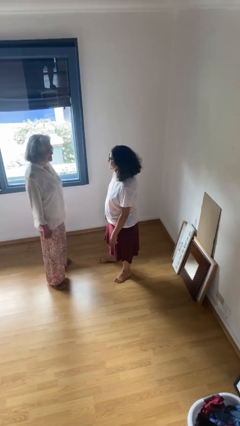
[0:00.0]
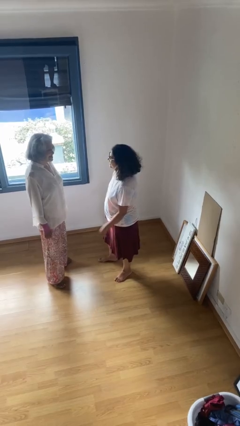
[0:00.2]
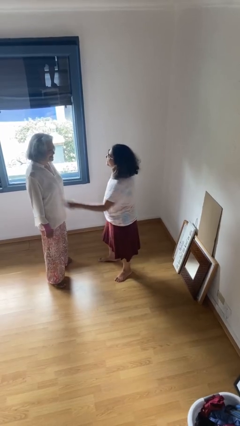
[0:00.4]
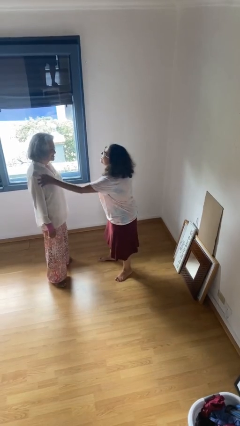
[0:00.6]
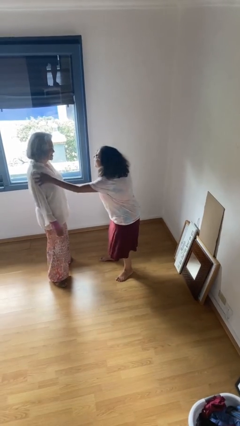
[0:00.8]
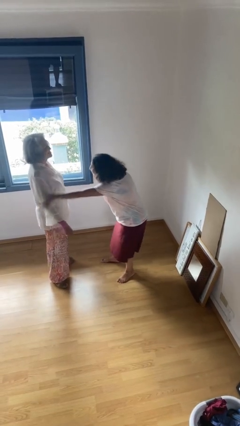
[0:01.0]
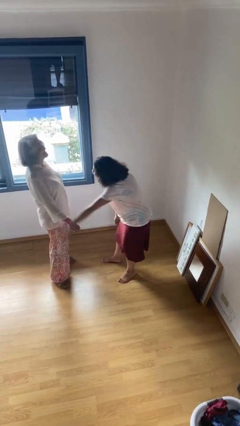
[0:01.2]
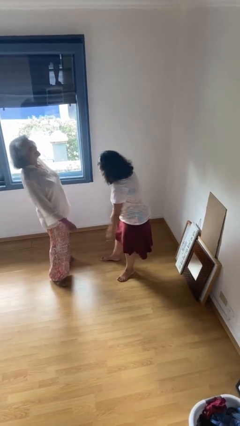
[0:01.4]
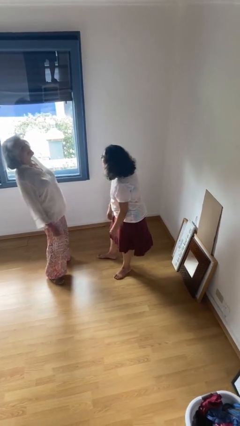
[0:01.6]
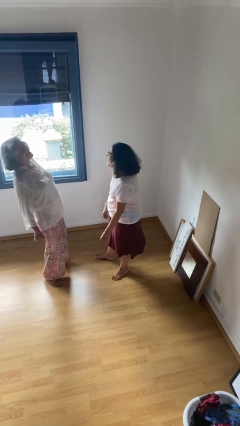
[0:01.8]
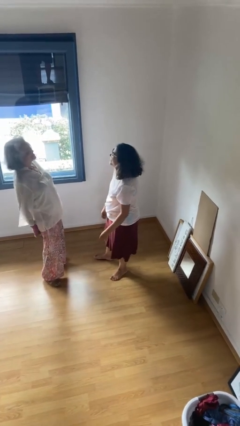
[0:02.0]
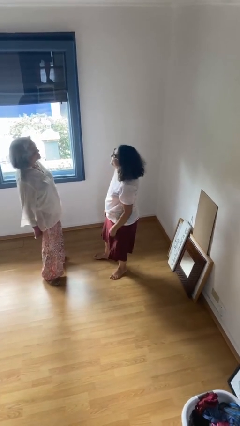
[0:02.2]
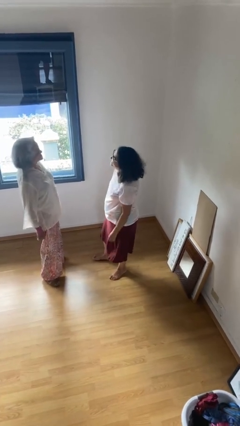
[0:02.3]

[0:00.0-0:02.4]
person shoves person

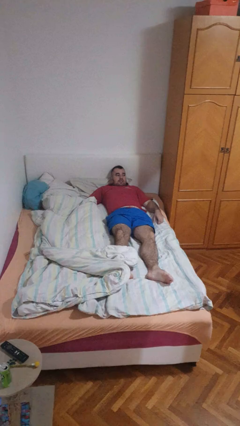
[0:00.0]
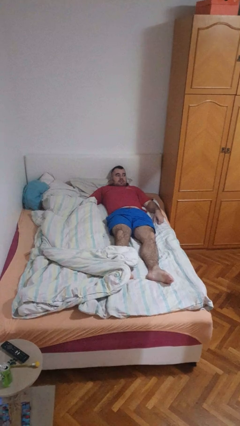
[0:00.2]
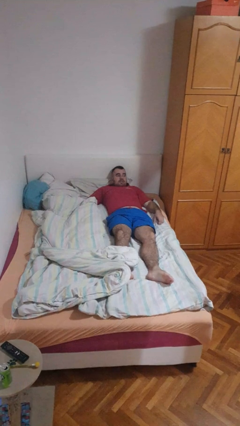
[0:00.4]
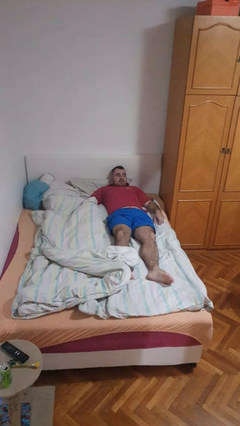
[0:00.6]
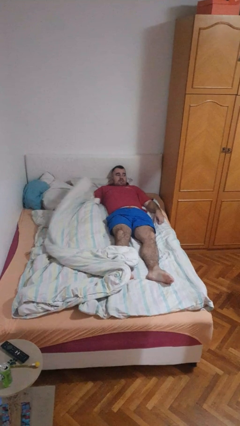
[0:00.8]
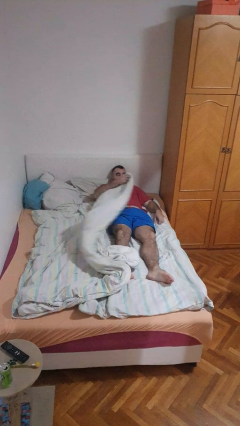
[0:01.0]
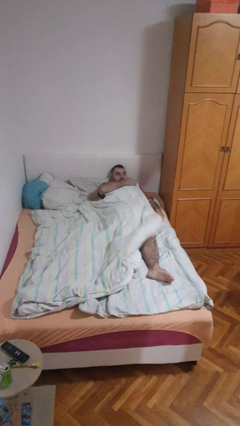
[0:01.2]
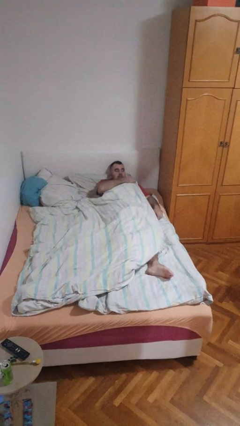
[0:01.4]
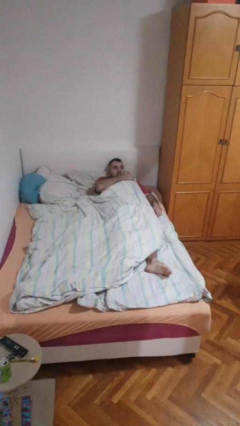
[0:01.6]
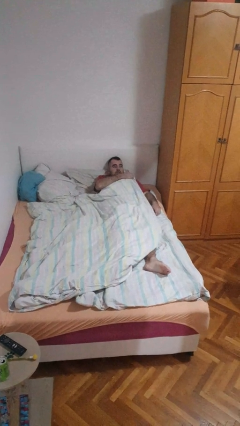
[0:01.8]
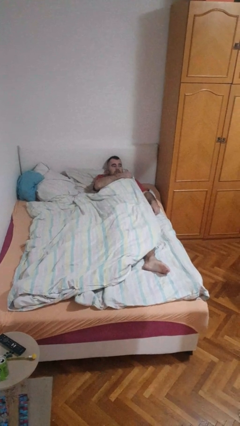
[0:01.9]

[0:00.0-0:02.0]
person covers with bedsheets

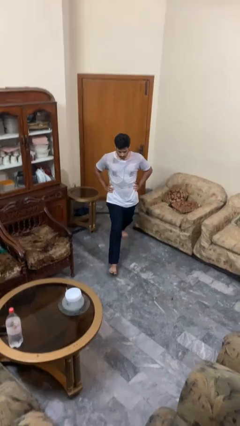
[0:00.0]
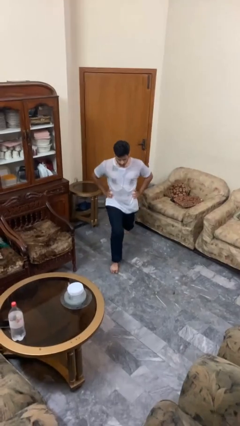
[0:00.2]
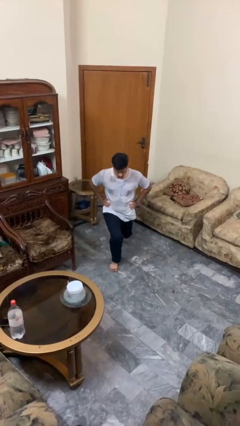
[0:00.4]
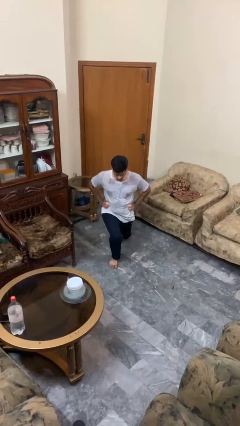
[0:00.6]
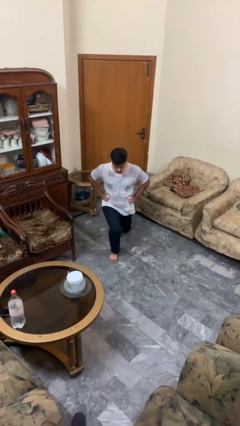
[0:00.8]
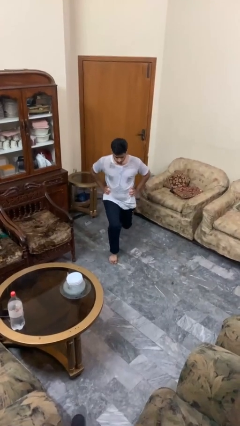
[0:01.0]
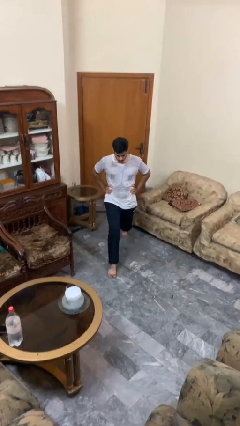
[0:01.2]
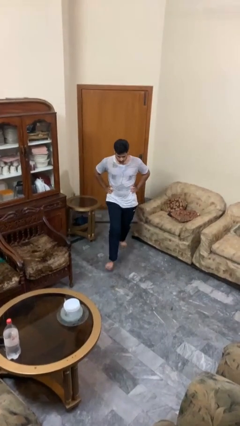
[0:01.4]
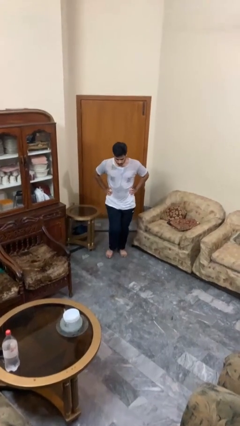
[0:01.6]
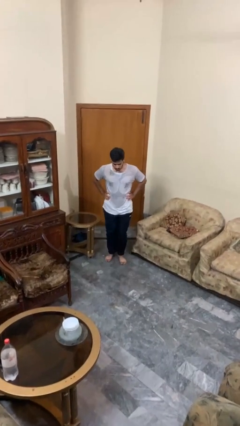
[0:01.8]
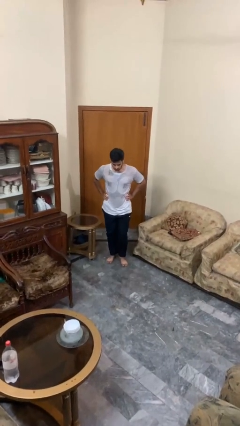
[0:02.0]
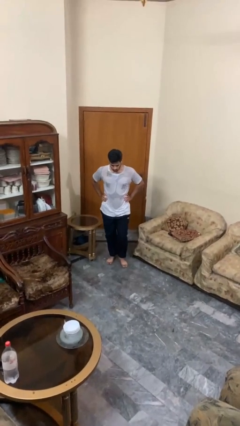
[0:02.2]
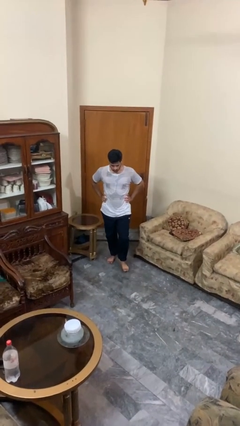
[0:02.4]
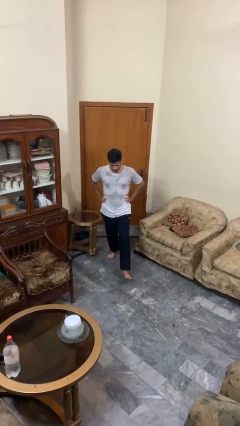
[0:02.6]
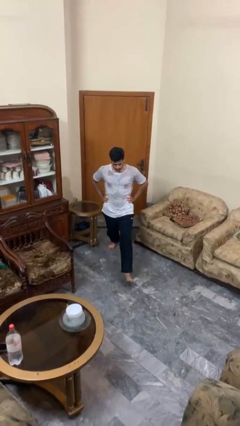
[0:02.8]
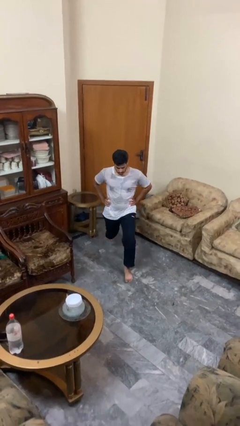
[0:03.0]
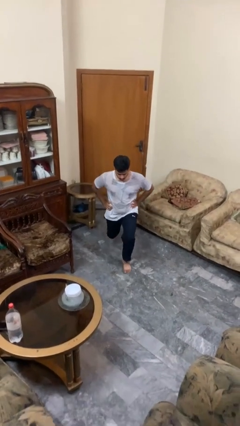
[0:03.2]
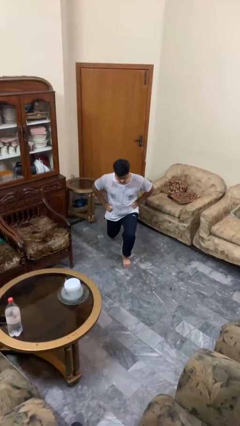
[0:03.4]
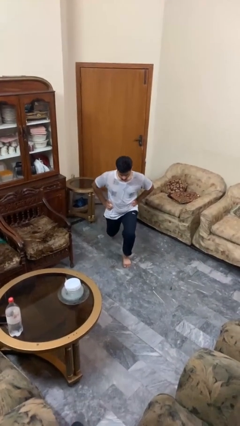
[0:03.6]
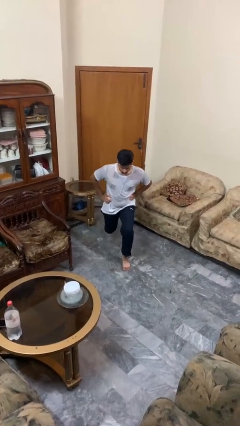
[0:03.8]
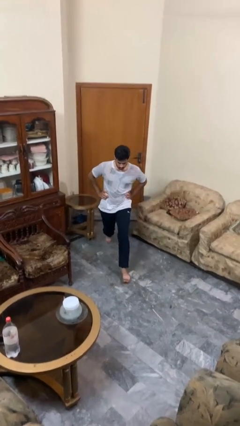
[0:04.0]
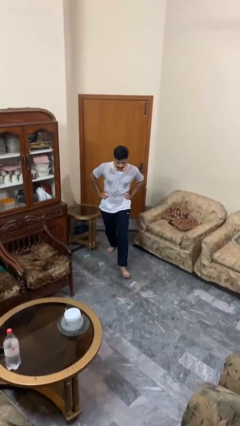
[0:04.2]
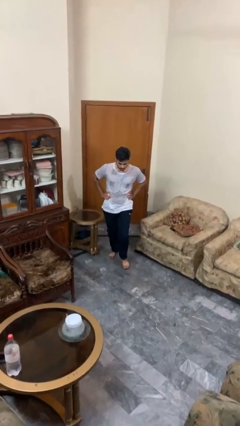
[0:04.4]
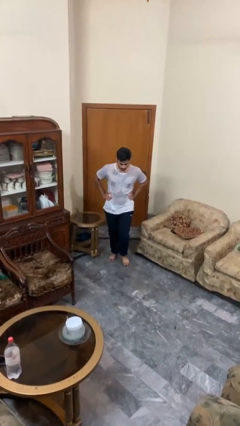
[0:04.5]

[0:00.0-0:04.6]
person exercises with lunges

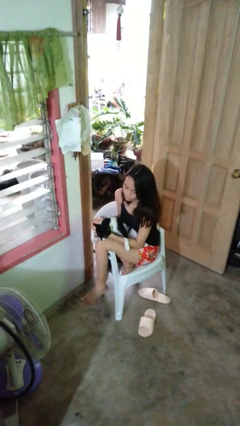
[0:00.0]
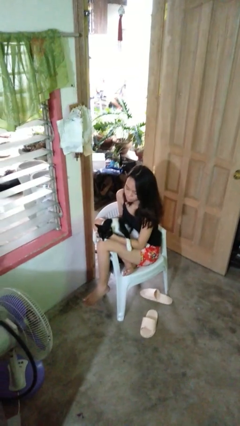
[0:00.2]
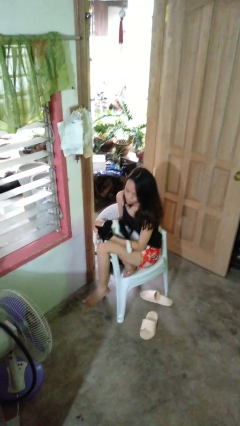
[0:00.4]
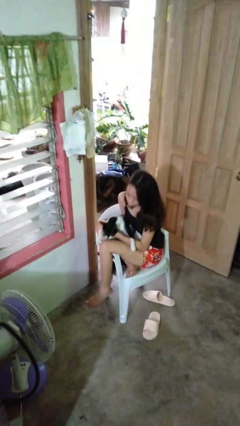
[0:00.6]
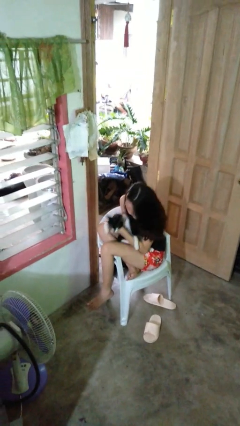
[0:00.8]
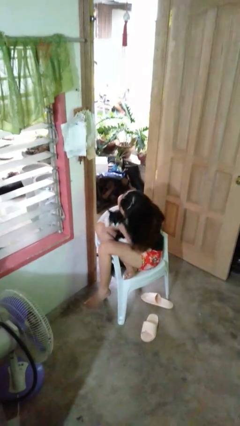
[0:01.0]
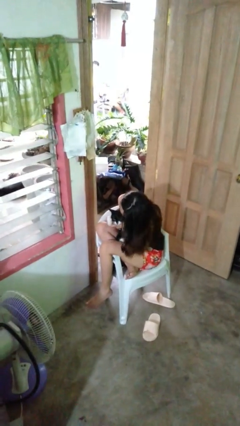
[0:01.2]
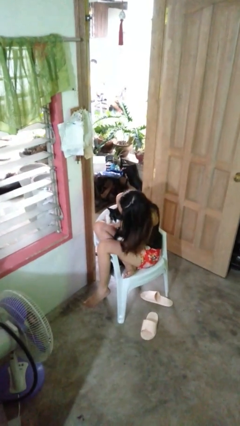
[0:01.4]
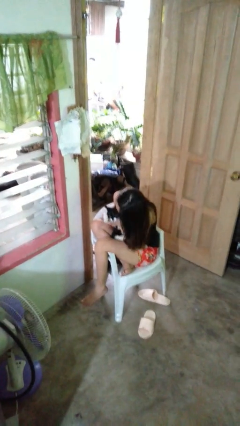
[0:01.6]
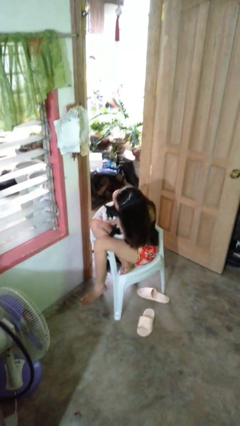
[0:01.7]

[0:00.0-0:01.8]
person hugs cat

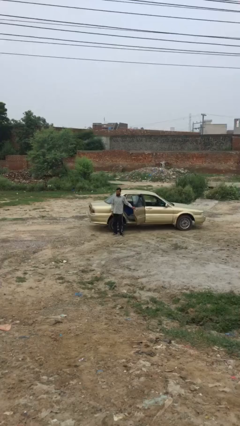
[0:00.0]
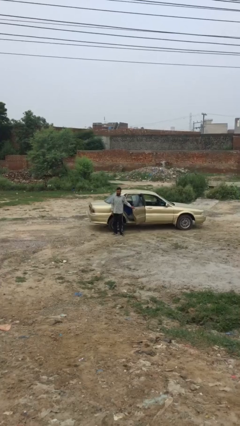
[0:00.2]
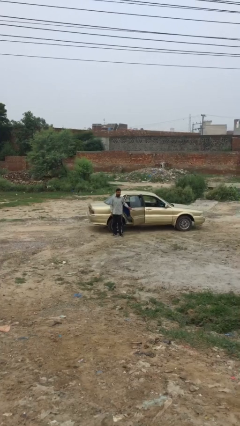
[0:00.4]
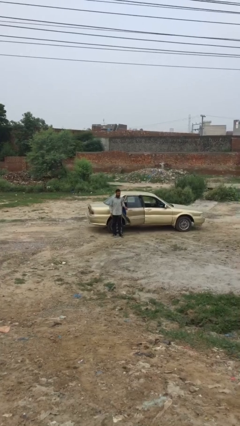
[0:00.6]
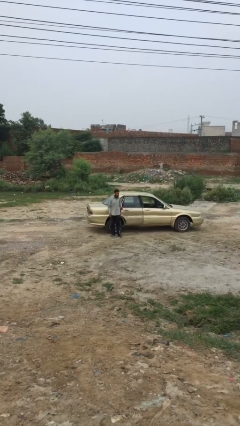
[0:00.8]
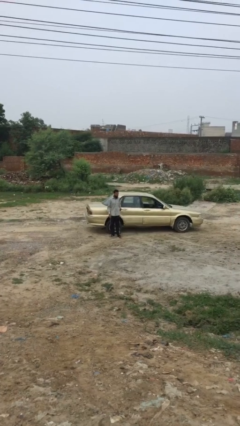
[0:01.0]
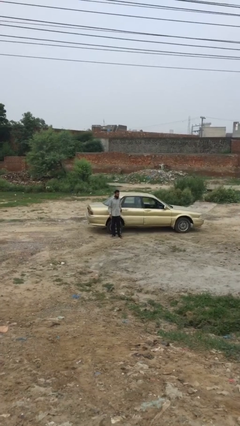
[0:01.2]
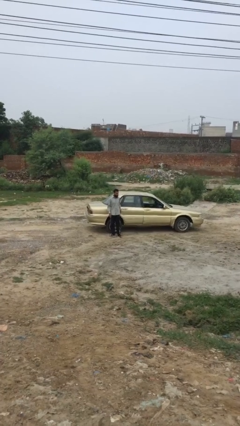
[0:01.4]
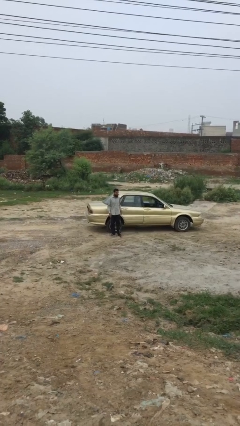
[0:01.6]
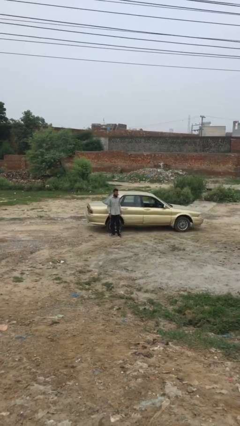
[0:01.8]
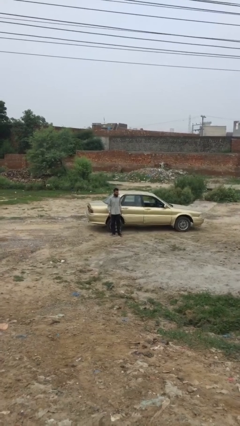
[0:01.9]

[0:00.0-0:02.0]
person closes car door

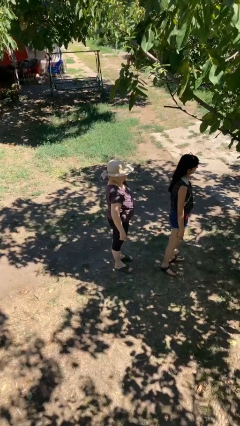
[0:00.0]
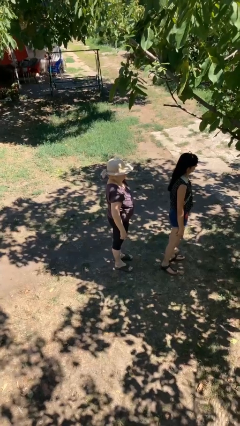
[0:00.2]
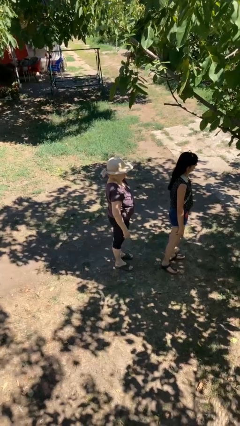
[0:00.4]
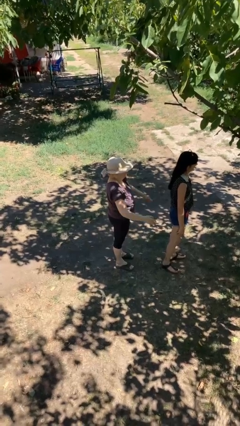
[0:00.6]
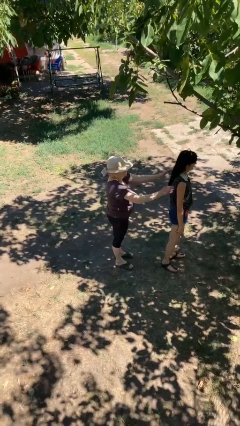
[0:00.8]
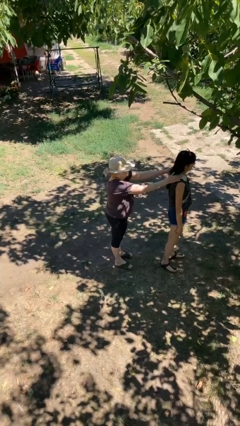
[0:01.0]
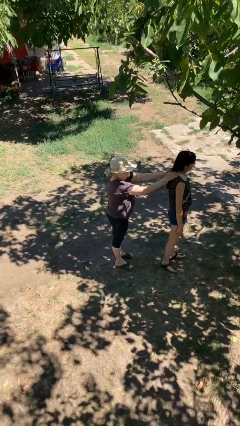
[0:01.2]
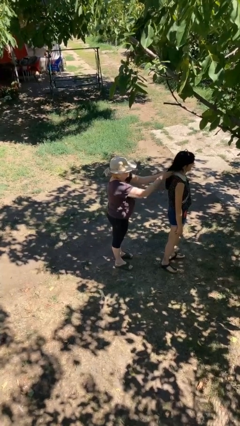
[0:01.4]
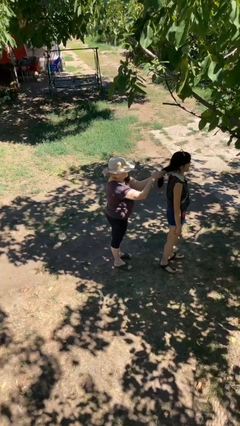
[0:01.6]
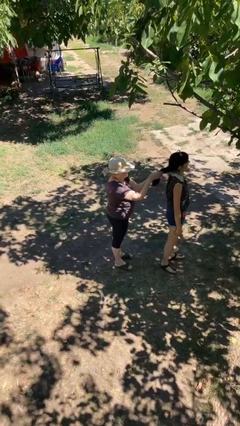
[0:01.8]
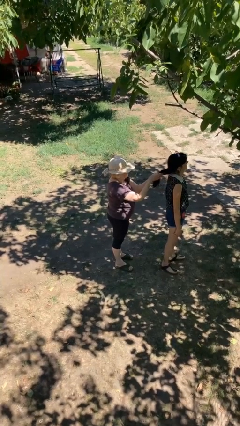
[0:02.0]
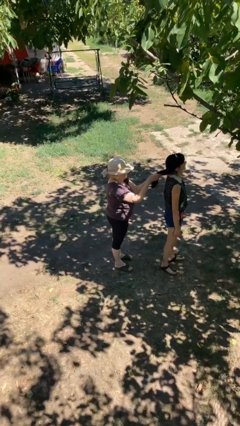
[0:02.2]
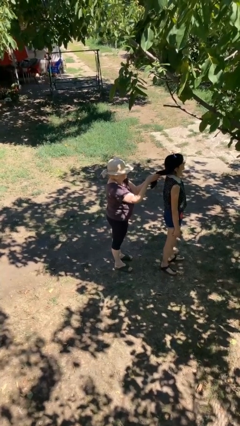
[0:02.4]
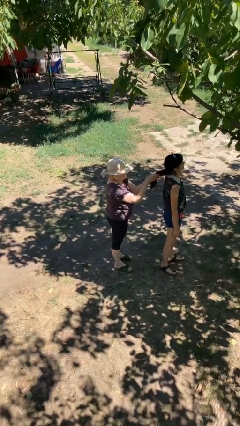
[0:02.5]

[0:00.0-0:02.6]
person grabs person by hair

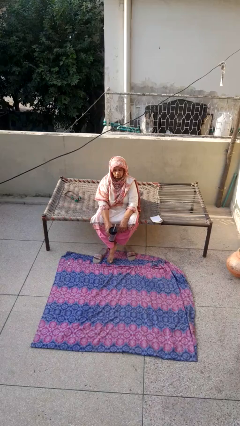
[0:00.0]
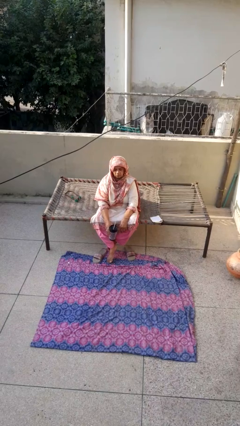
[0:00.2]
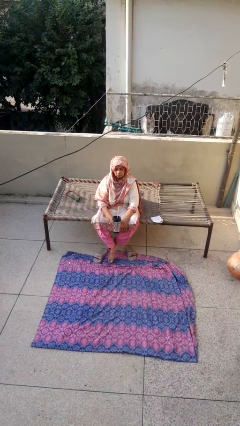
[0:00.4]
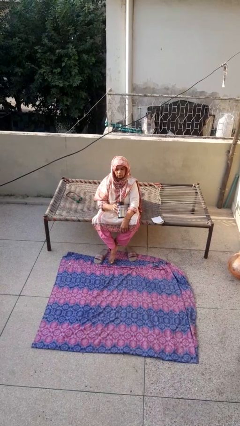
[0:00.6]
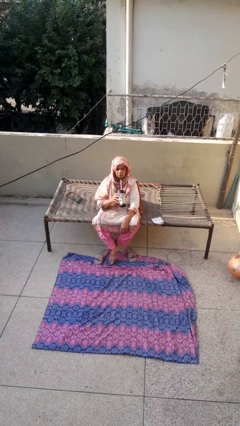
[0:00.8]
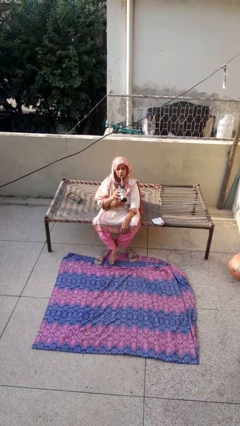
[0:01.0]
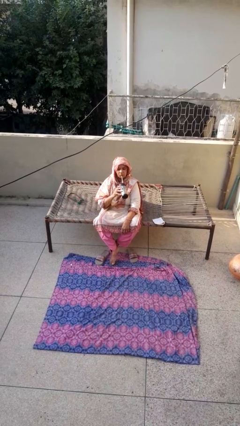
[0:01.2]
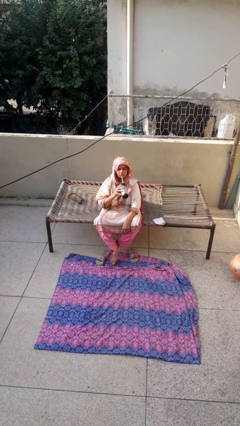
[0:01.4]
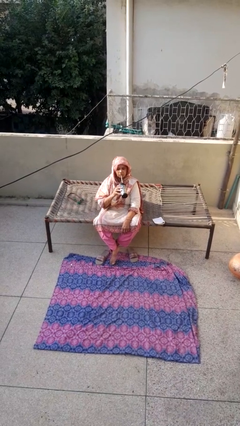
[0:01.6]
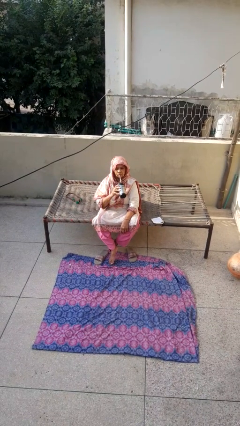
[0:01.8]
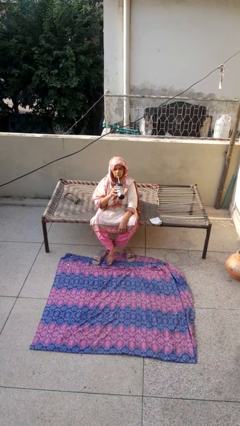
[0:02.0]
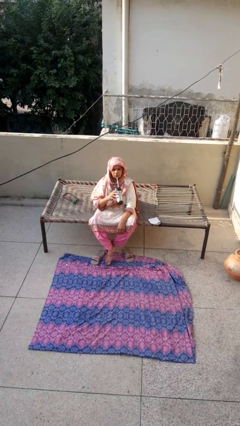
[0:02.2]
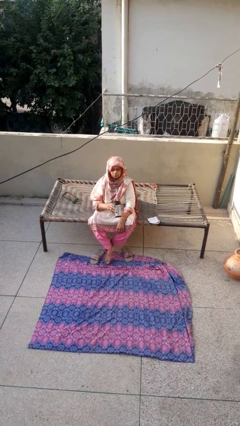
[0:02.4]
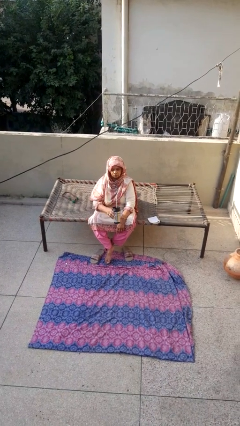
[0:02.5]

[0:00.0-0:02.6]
person drinks from straw
